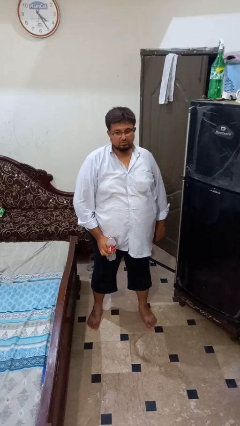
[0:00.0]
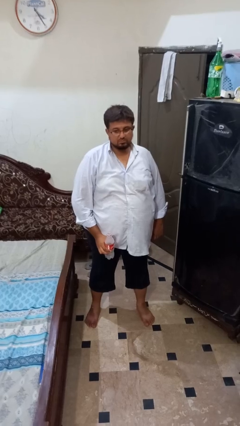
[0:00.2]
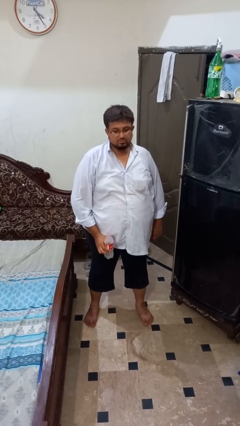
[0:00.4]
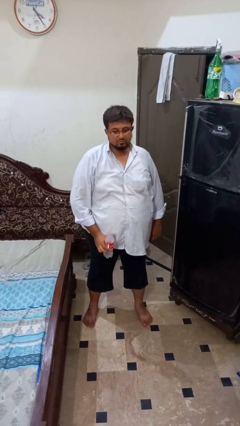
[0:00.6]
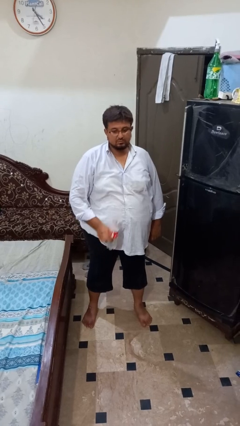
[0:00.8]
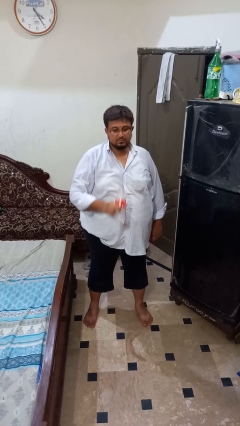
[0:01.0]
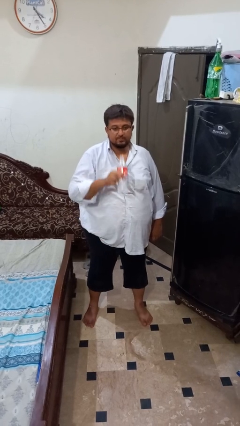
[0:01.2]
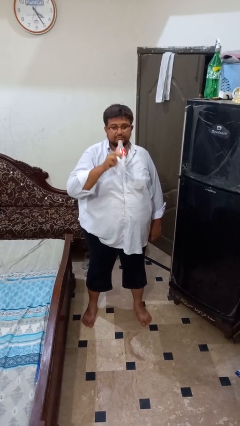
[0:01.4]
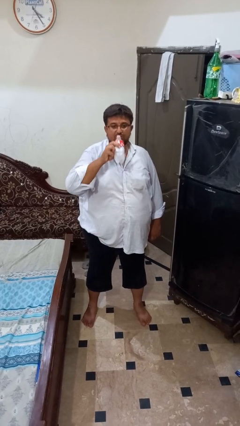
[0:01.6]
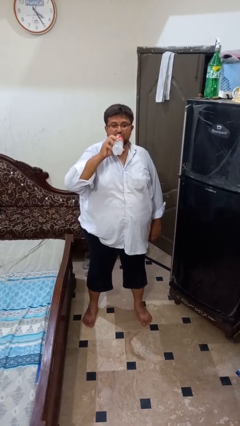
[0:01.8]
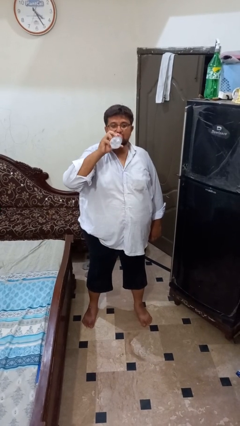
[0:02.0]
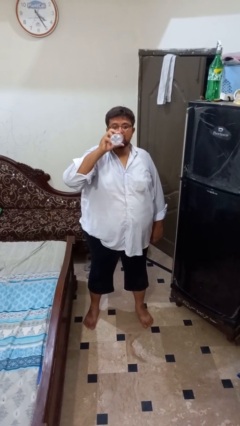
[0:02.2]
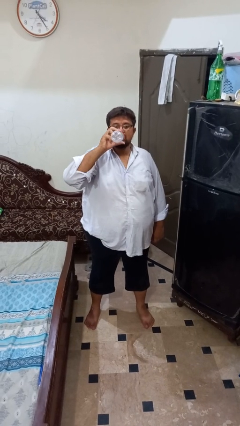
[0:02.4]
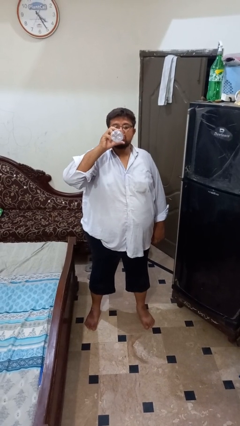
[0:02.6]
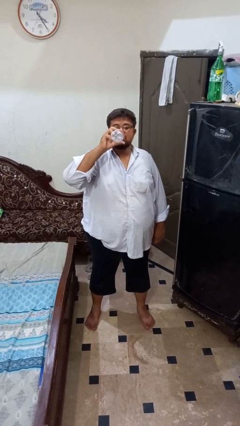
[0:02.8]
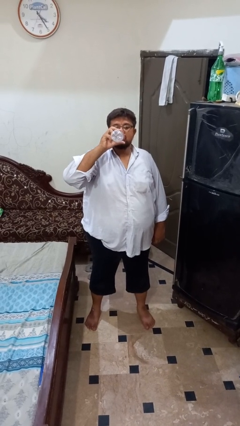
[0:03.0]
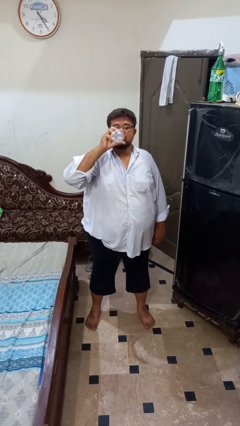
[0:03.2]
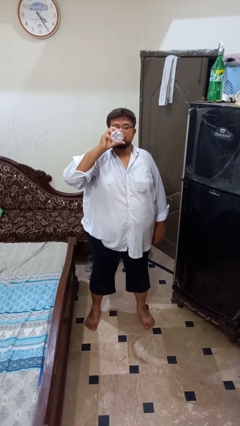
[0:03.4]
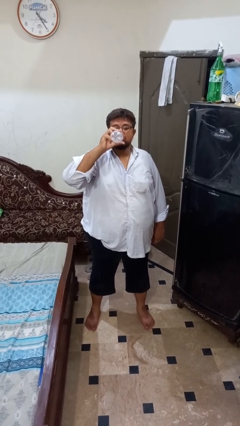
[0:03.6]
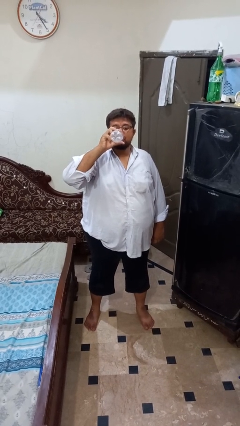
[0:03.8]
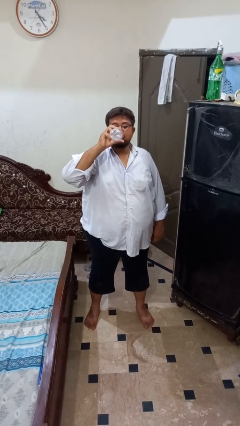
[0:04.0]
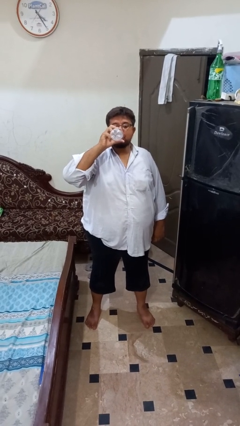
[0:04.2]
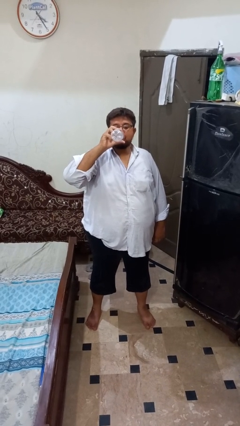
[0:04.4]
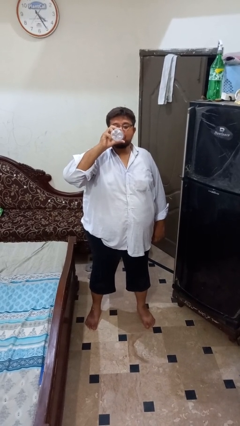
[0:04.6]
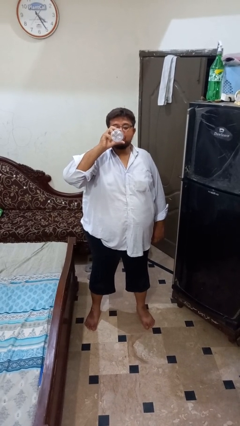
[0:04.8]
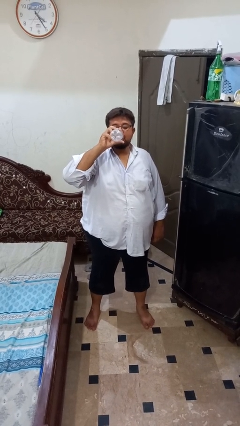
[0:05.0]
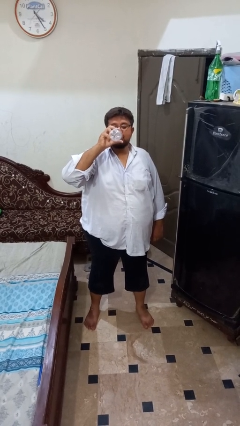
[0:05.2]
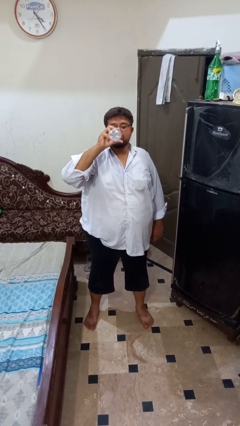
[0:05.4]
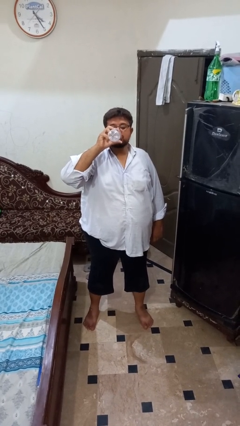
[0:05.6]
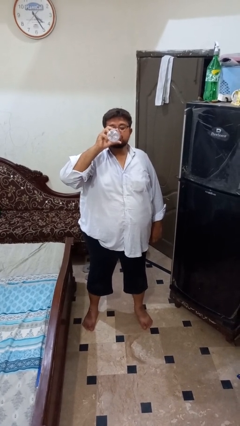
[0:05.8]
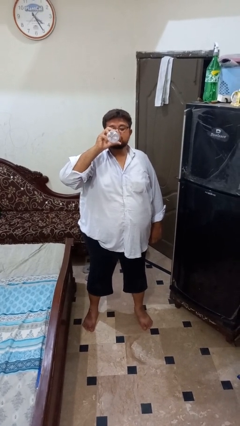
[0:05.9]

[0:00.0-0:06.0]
person drinks from bottle

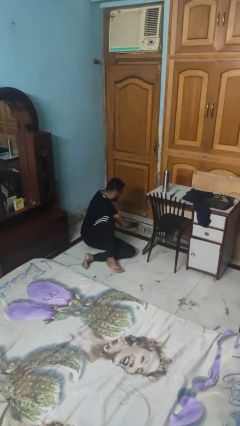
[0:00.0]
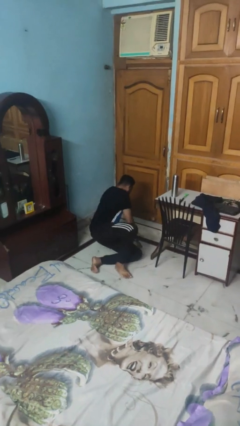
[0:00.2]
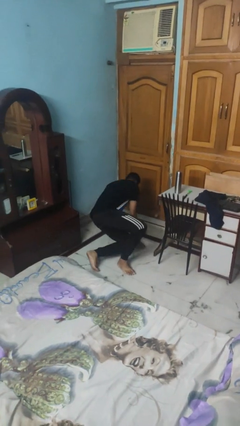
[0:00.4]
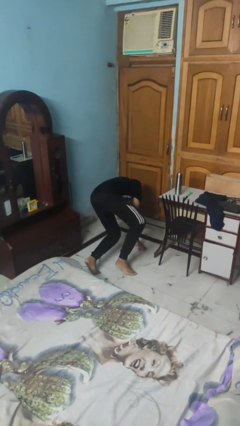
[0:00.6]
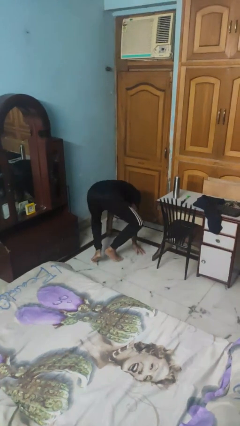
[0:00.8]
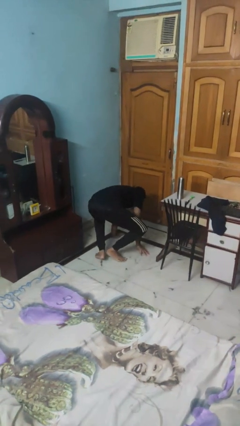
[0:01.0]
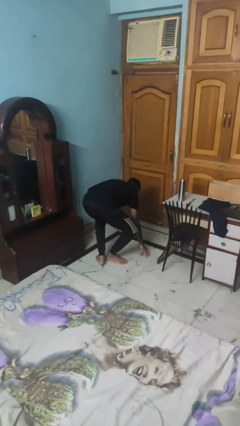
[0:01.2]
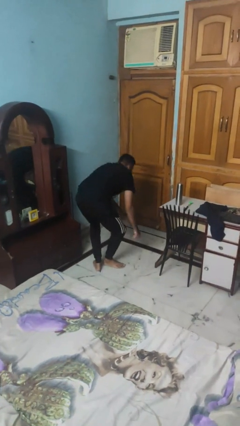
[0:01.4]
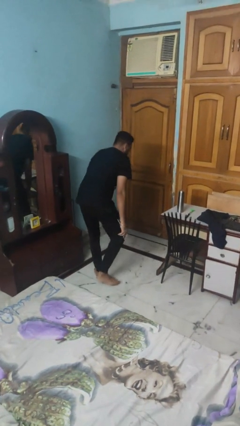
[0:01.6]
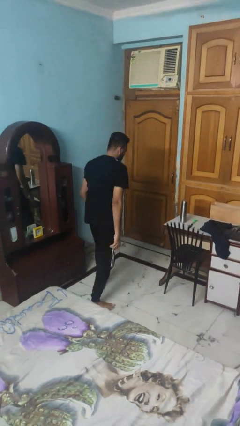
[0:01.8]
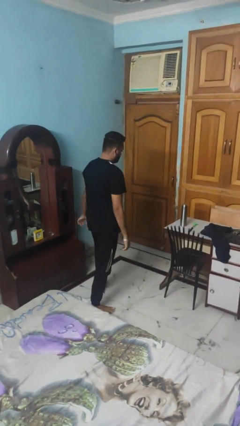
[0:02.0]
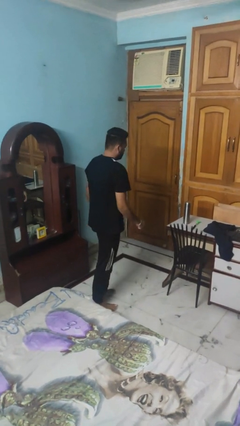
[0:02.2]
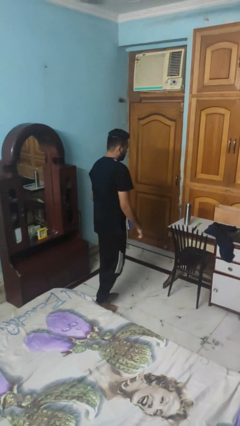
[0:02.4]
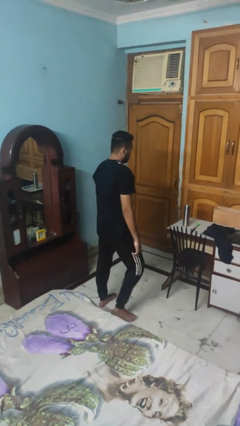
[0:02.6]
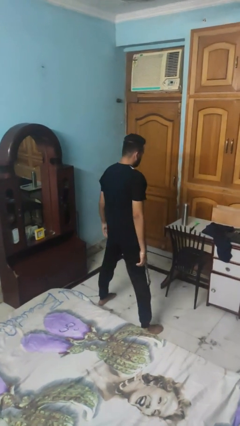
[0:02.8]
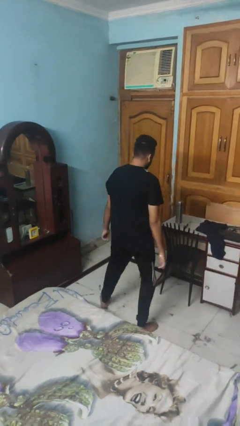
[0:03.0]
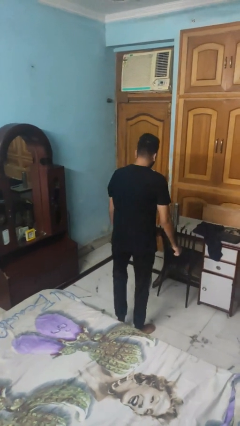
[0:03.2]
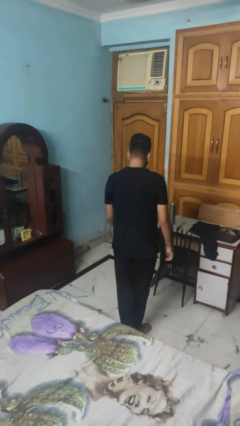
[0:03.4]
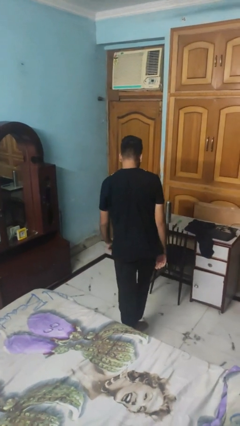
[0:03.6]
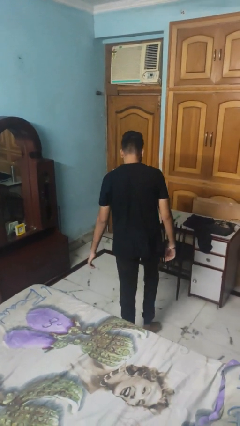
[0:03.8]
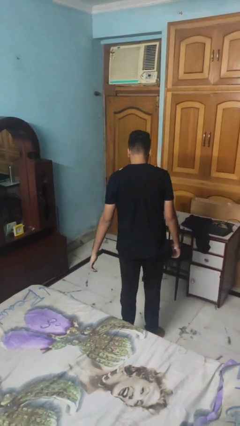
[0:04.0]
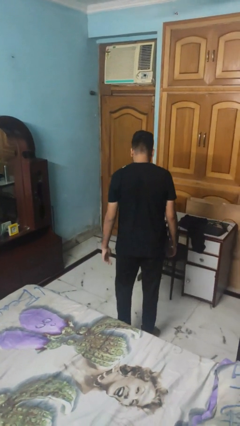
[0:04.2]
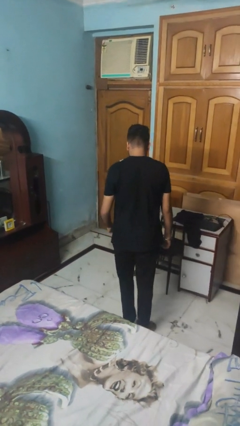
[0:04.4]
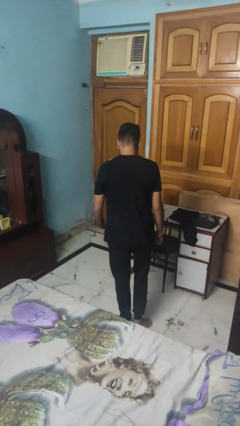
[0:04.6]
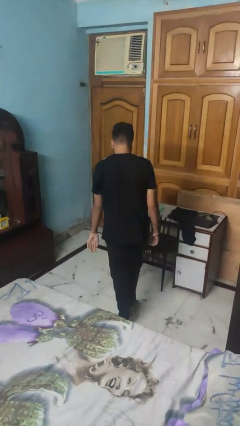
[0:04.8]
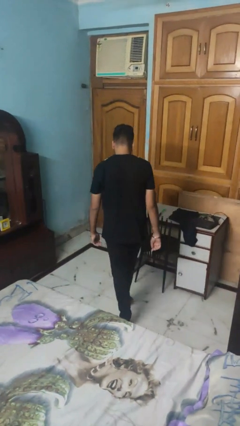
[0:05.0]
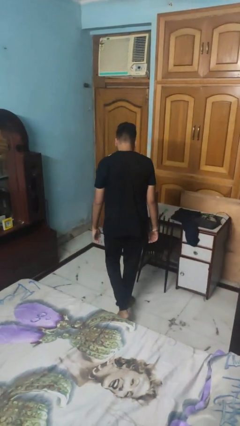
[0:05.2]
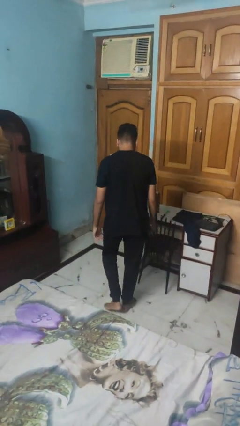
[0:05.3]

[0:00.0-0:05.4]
person stands up from floor

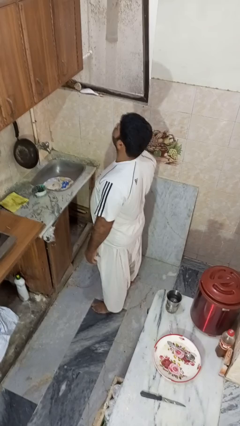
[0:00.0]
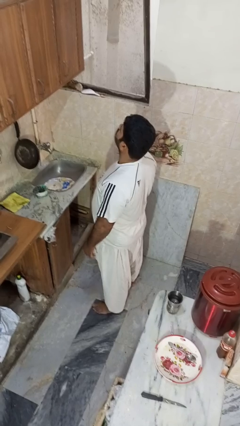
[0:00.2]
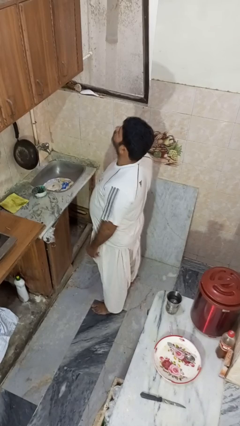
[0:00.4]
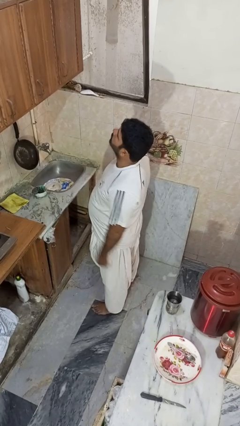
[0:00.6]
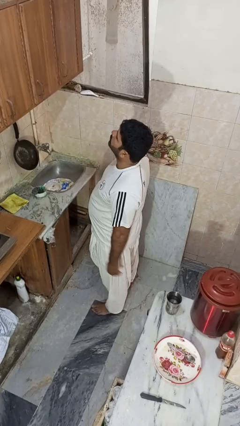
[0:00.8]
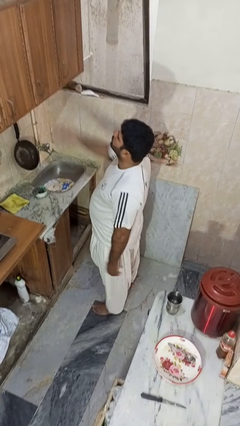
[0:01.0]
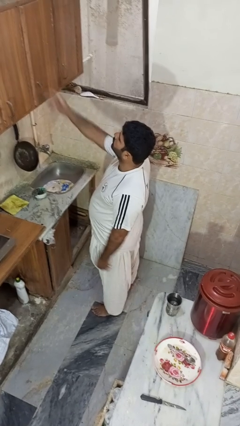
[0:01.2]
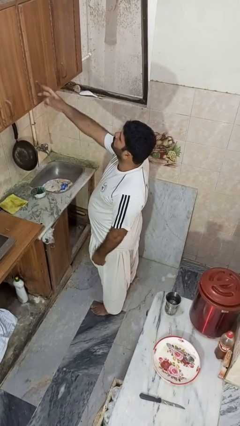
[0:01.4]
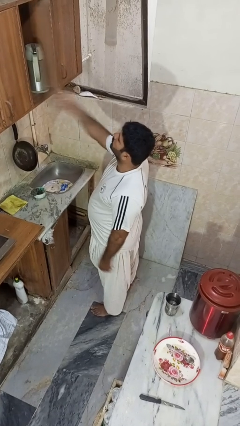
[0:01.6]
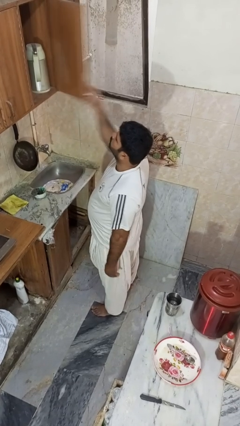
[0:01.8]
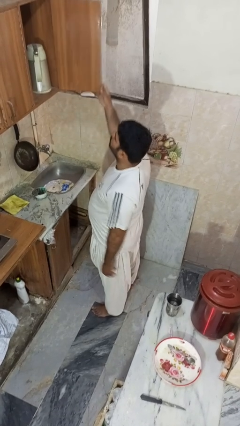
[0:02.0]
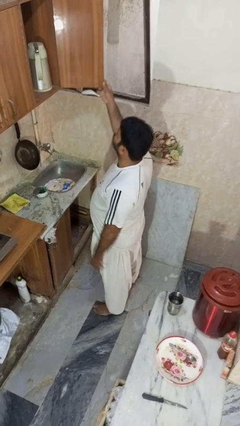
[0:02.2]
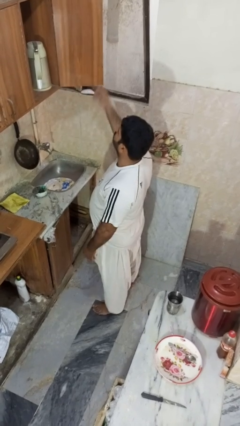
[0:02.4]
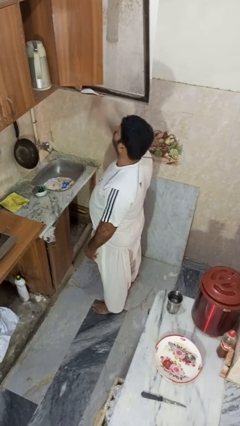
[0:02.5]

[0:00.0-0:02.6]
person opens cabinet

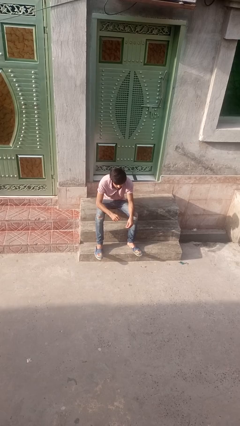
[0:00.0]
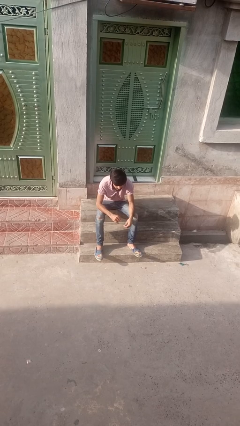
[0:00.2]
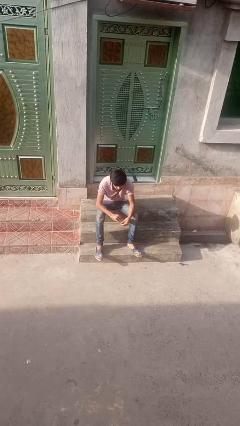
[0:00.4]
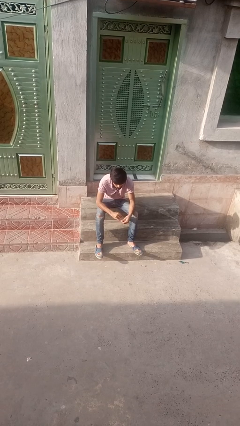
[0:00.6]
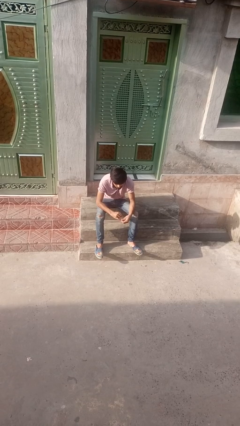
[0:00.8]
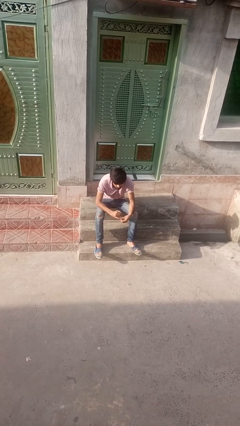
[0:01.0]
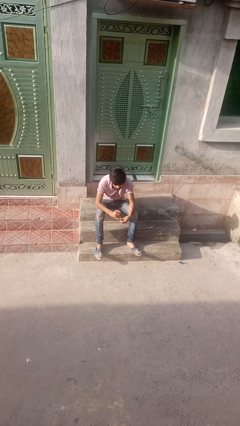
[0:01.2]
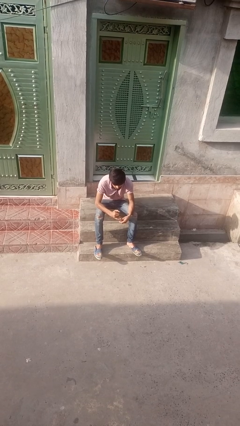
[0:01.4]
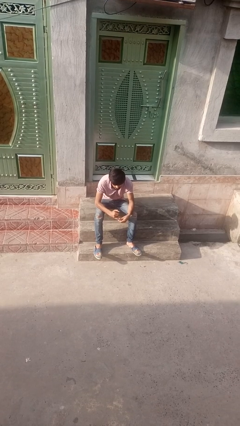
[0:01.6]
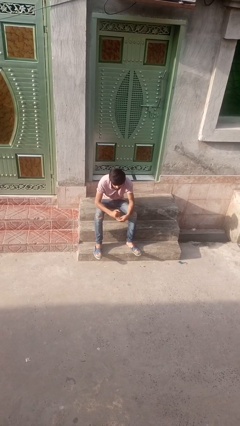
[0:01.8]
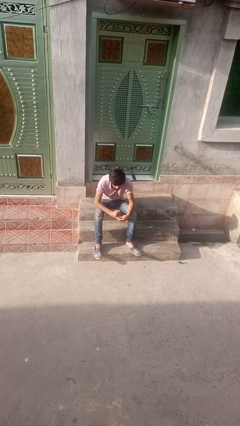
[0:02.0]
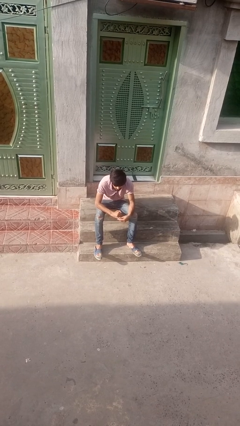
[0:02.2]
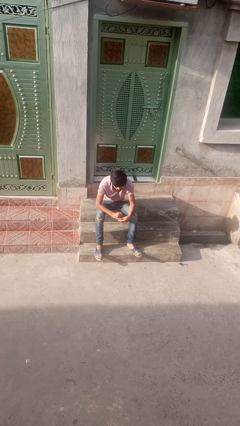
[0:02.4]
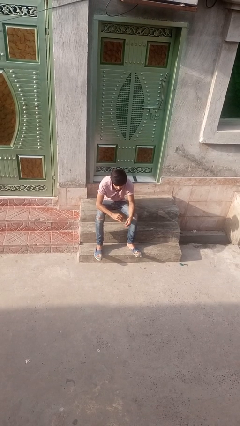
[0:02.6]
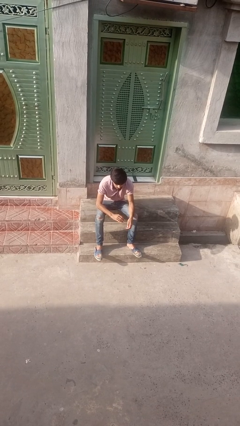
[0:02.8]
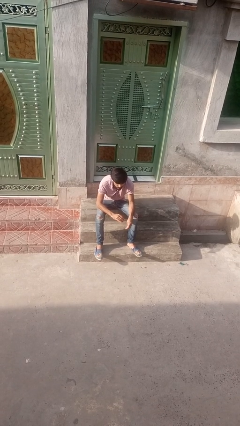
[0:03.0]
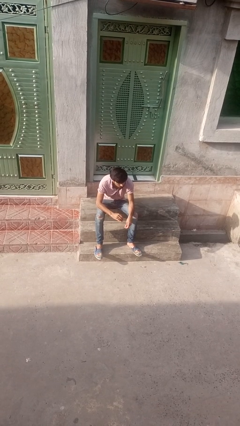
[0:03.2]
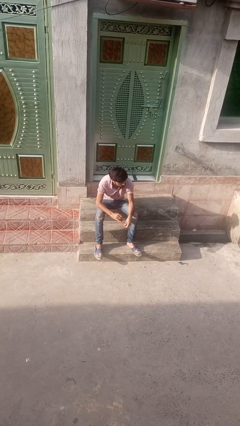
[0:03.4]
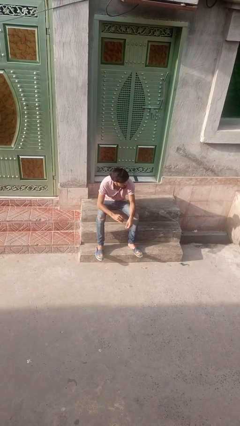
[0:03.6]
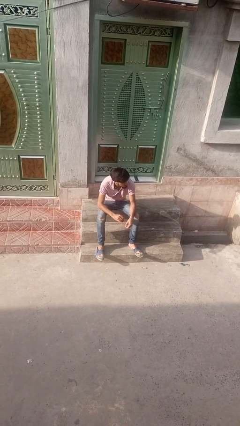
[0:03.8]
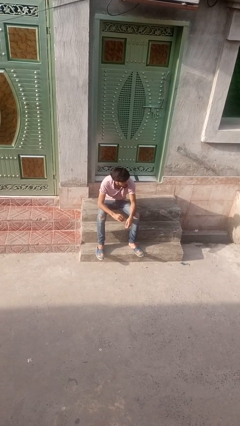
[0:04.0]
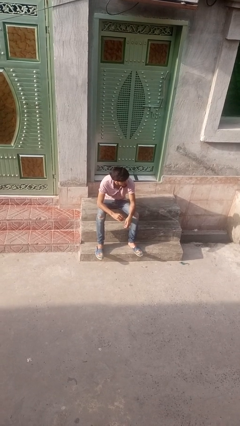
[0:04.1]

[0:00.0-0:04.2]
person puts on ring
